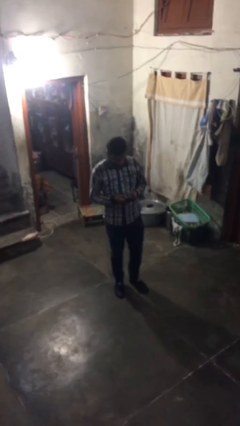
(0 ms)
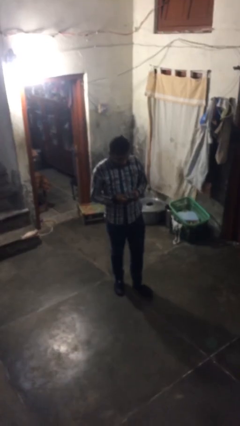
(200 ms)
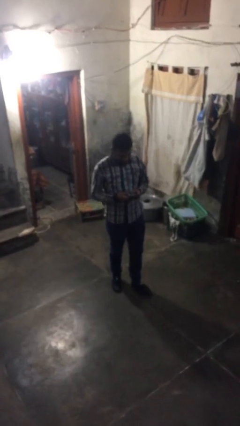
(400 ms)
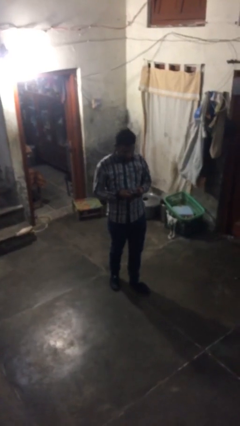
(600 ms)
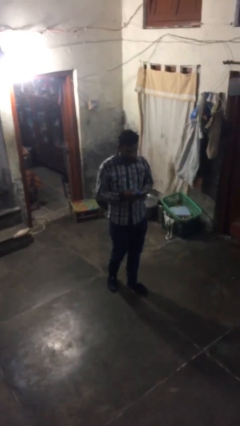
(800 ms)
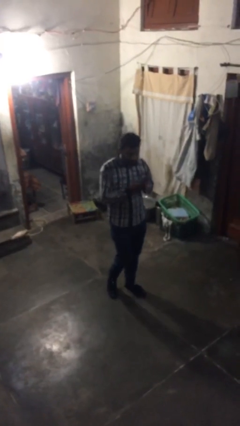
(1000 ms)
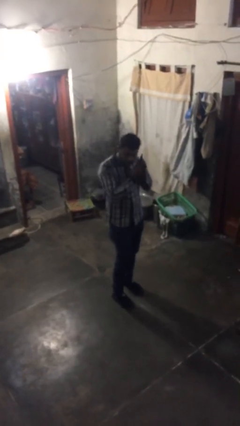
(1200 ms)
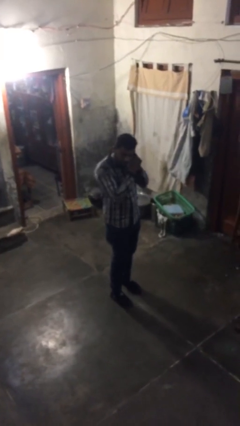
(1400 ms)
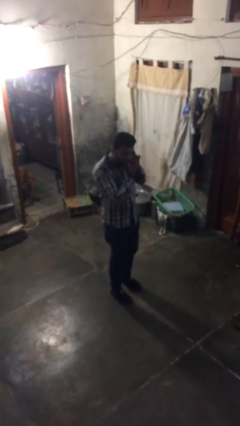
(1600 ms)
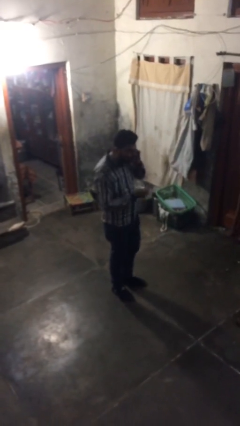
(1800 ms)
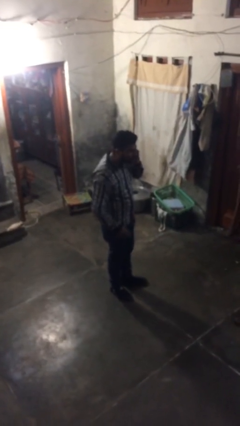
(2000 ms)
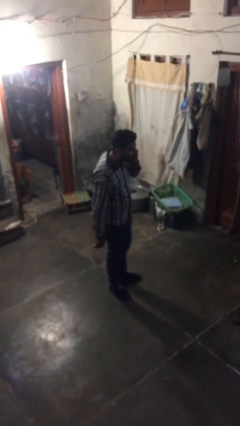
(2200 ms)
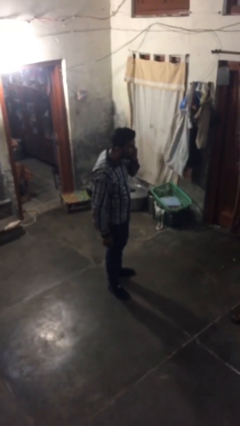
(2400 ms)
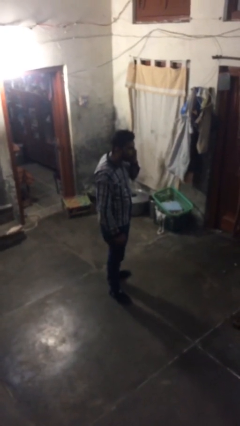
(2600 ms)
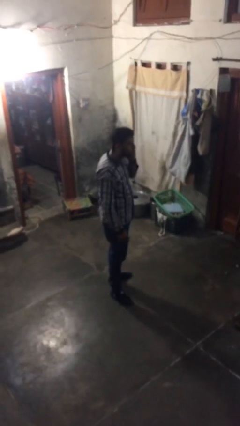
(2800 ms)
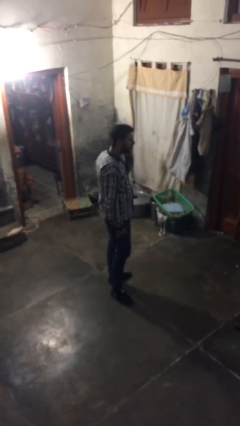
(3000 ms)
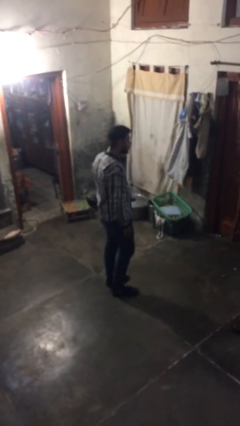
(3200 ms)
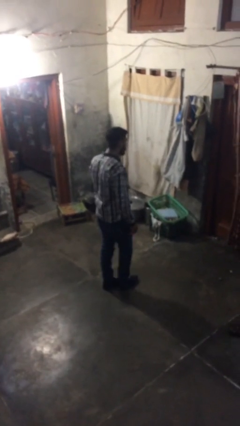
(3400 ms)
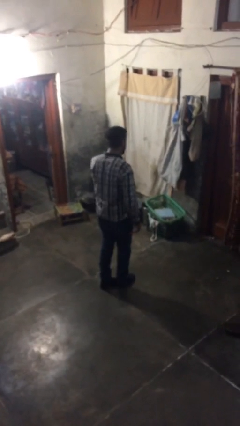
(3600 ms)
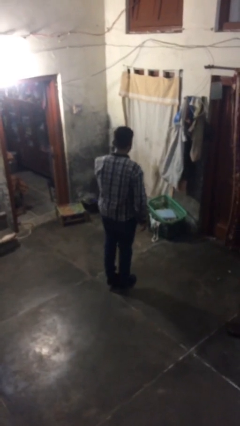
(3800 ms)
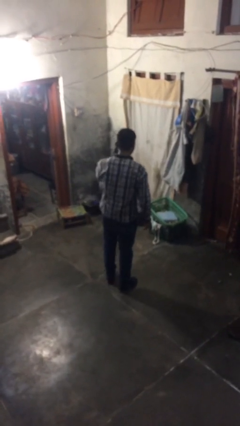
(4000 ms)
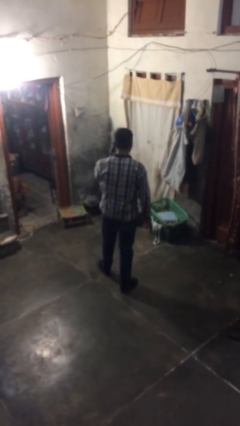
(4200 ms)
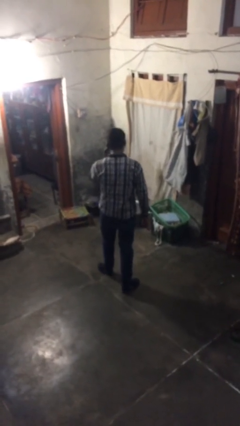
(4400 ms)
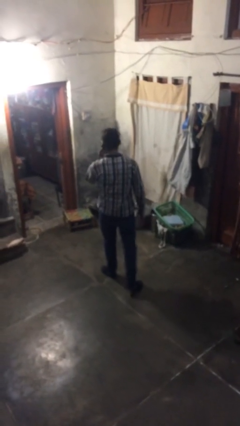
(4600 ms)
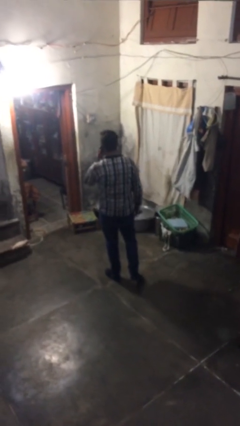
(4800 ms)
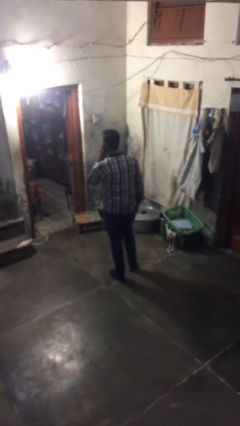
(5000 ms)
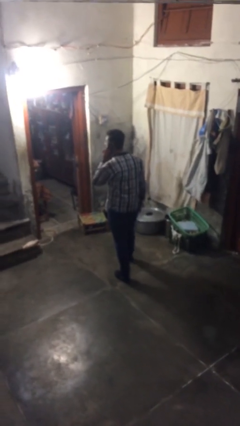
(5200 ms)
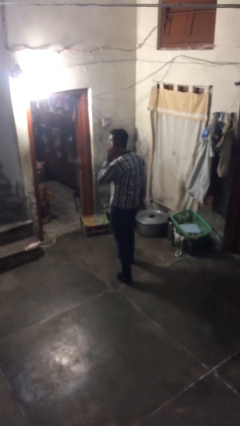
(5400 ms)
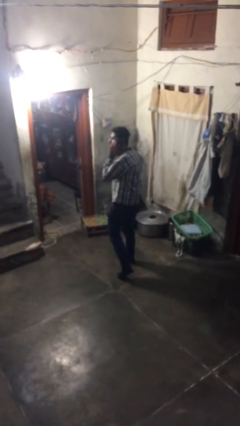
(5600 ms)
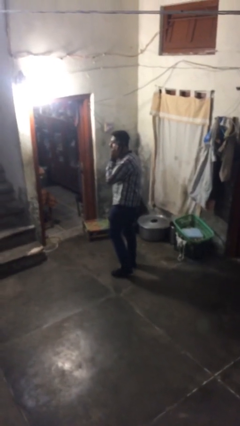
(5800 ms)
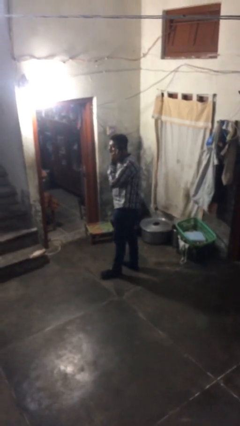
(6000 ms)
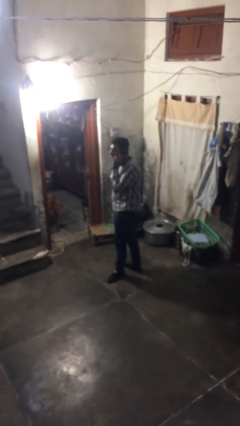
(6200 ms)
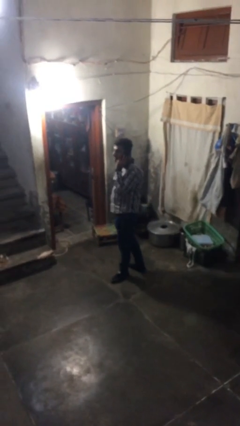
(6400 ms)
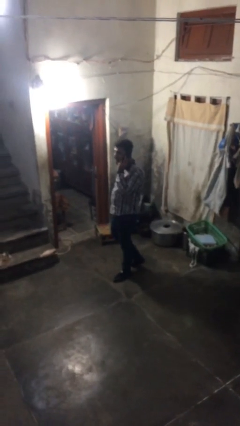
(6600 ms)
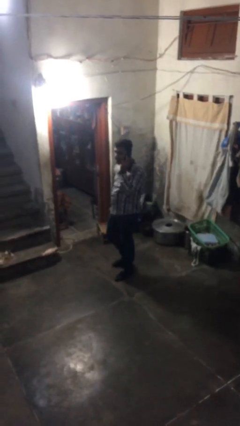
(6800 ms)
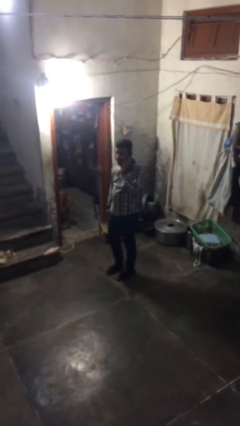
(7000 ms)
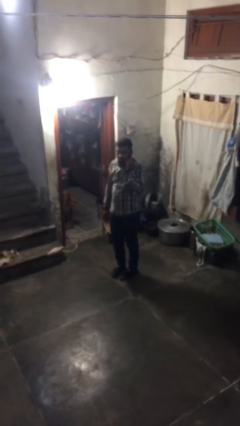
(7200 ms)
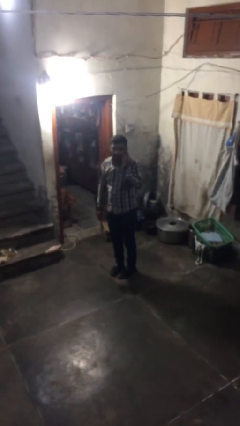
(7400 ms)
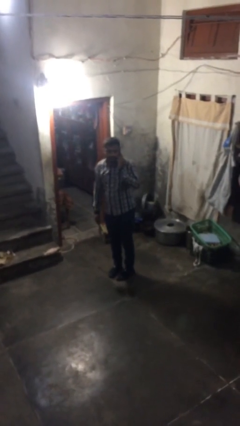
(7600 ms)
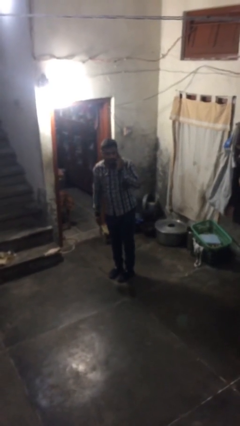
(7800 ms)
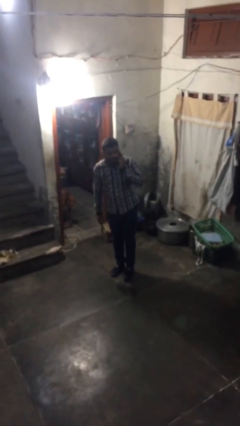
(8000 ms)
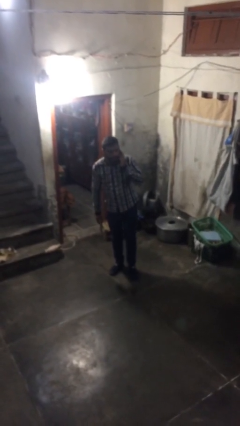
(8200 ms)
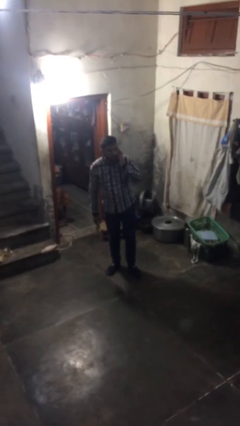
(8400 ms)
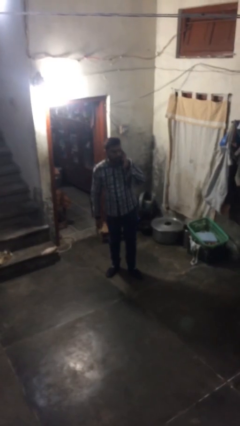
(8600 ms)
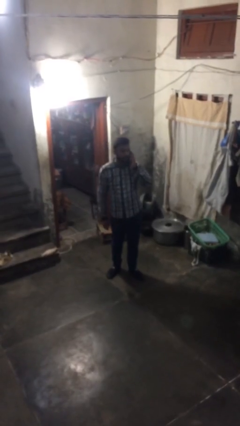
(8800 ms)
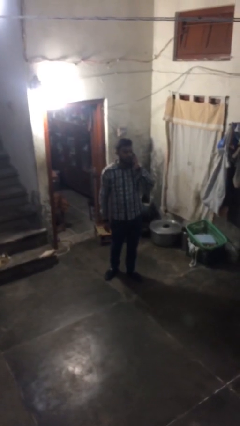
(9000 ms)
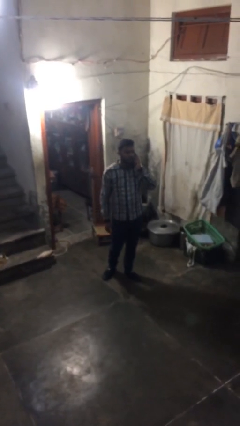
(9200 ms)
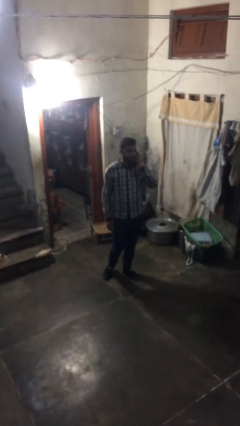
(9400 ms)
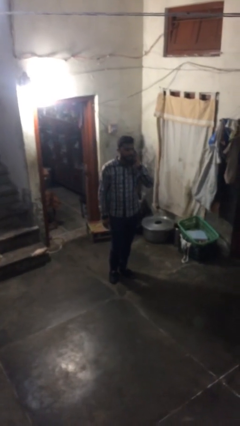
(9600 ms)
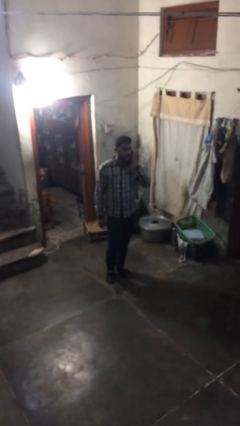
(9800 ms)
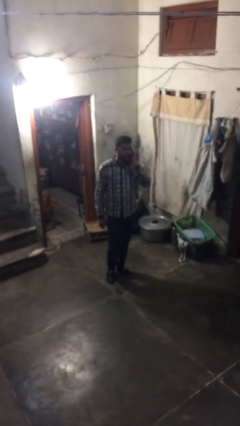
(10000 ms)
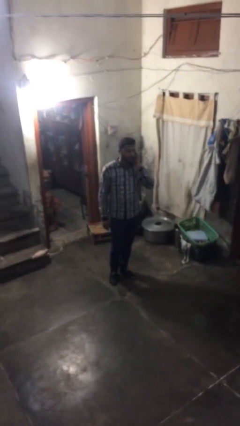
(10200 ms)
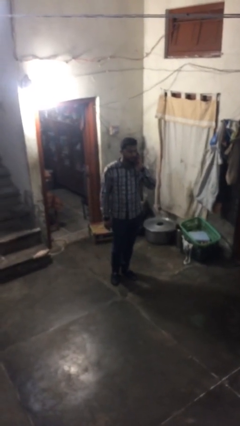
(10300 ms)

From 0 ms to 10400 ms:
person talks on phone

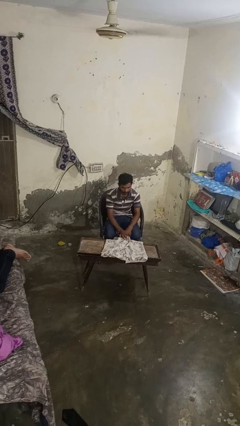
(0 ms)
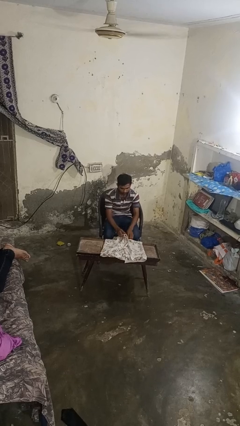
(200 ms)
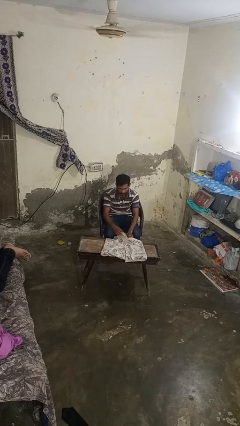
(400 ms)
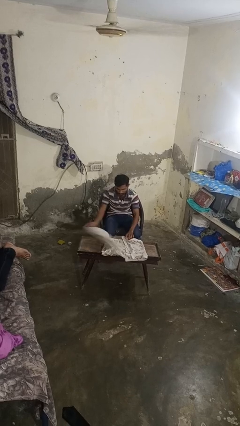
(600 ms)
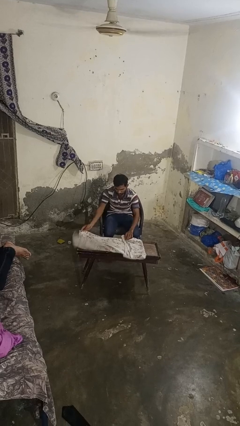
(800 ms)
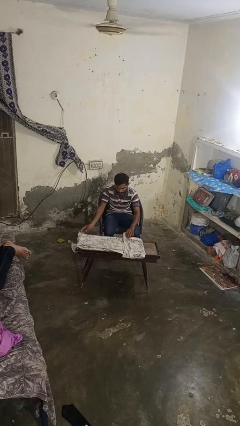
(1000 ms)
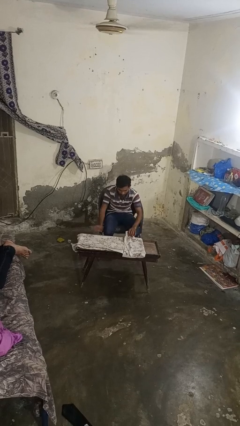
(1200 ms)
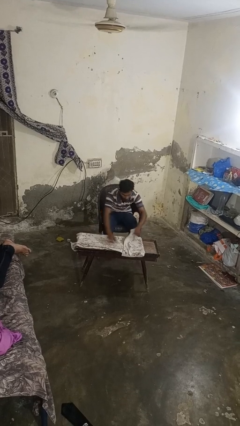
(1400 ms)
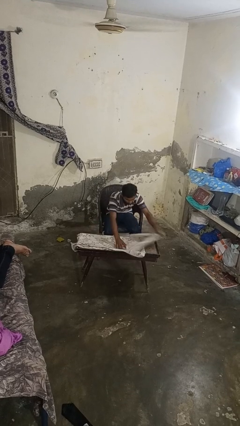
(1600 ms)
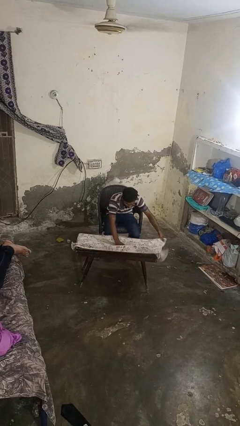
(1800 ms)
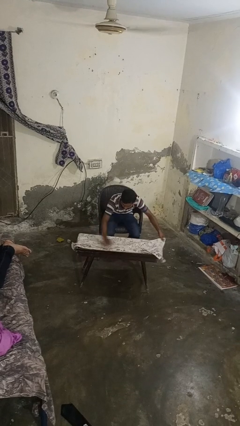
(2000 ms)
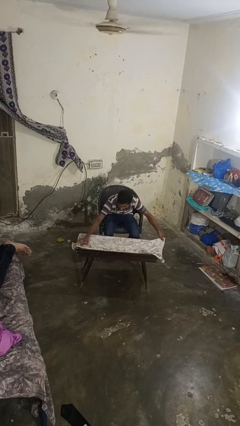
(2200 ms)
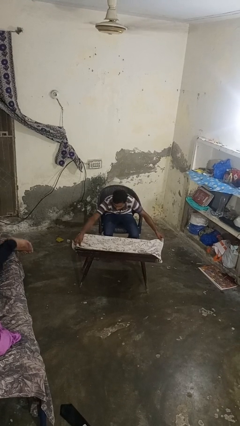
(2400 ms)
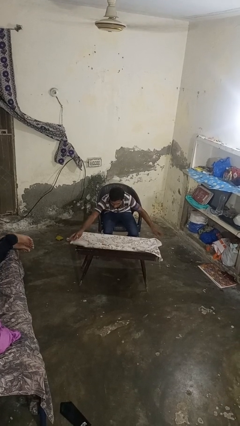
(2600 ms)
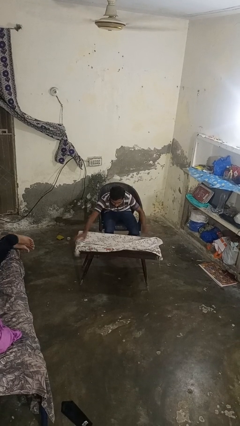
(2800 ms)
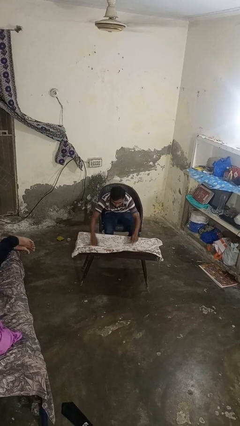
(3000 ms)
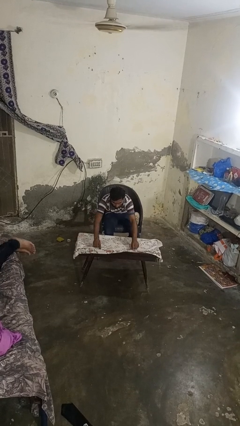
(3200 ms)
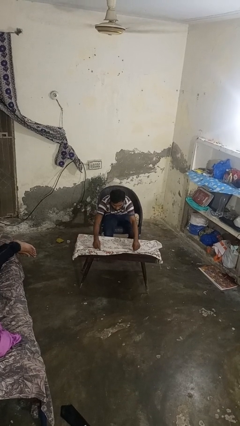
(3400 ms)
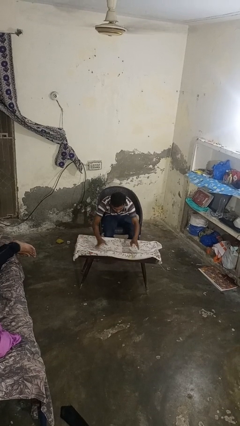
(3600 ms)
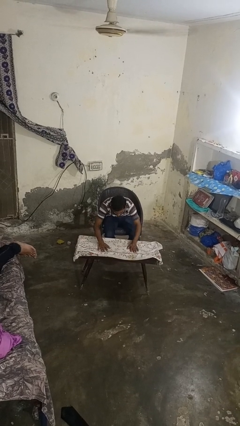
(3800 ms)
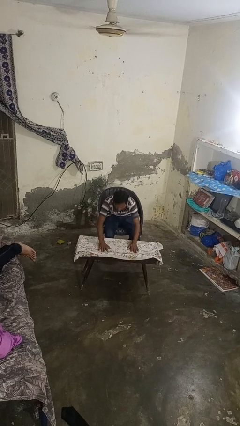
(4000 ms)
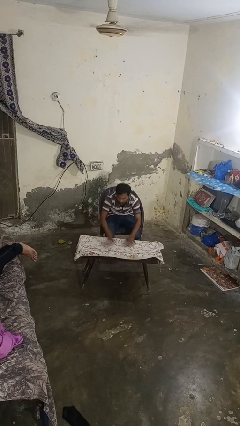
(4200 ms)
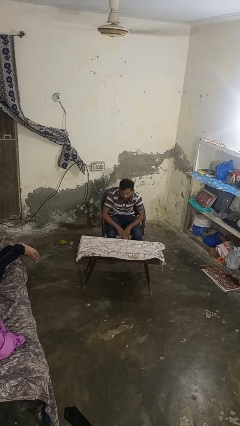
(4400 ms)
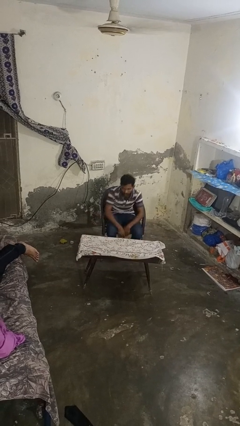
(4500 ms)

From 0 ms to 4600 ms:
person spreads tablecloth

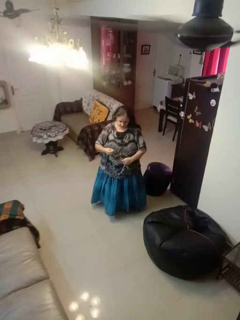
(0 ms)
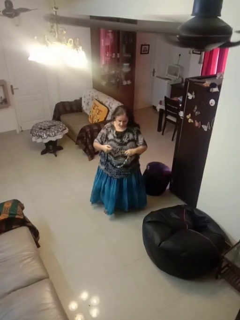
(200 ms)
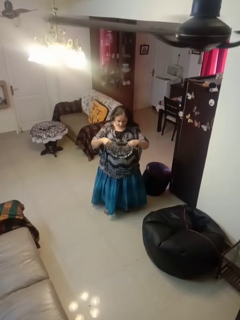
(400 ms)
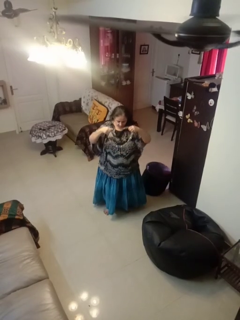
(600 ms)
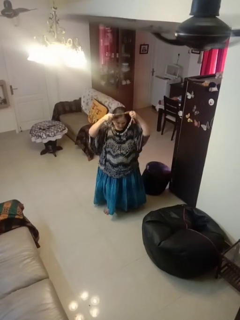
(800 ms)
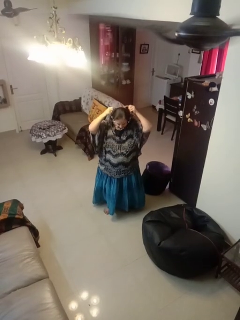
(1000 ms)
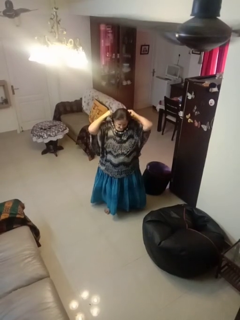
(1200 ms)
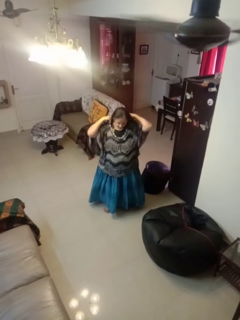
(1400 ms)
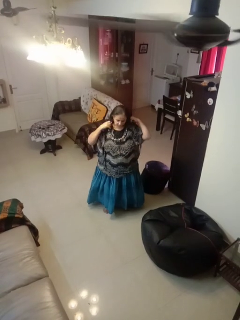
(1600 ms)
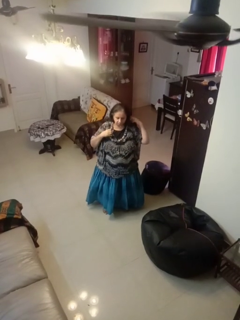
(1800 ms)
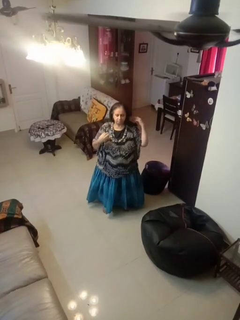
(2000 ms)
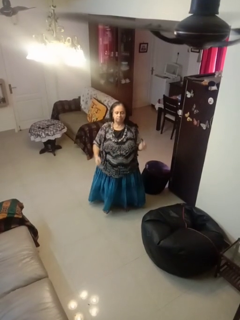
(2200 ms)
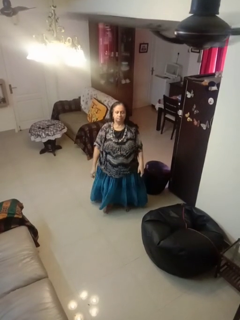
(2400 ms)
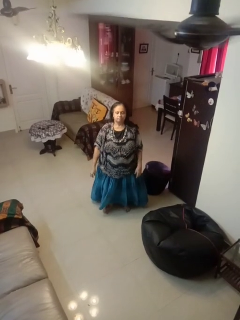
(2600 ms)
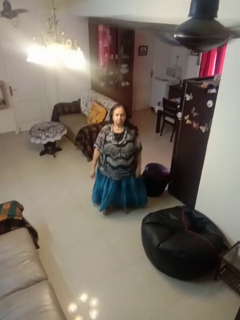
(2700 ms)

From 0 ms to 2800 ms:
person puts on necklace

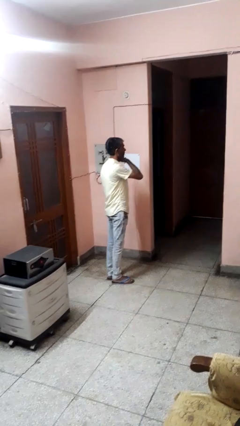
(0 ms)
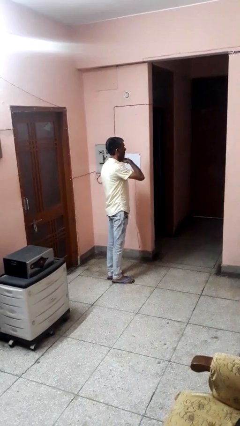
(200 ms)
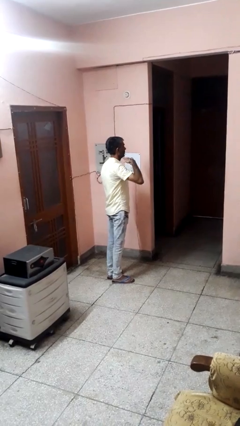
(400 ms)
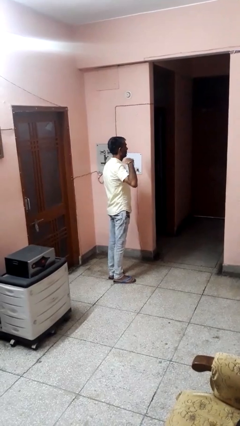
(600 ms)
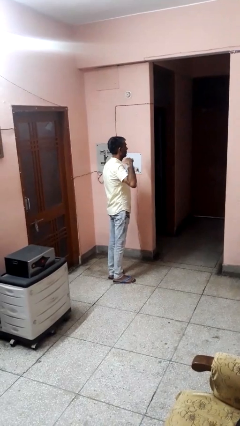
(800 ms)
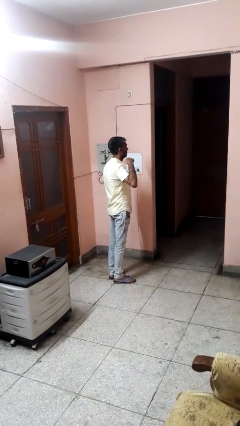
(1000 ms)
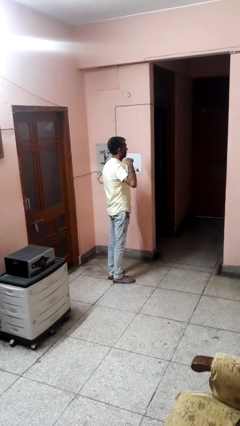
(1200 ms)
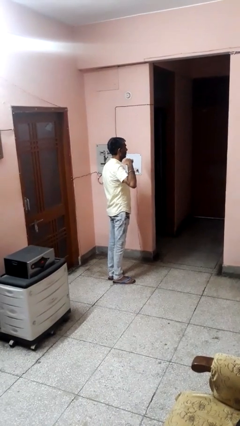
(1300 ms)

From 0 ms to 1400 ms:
person gestures cut
